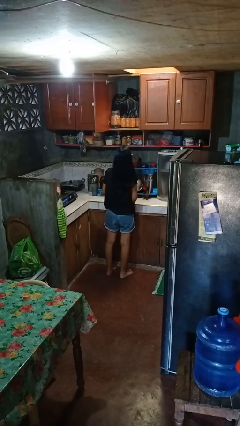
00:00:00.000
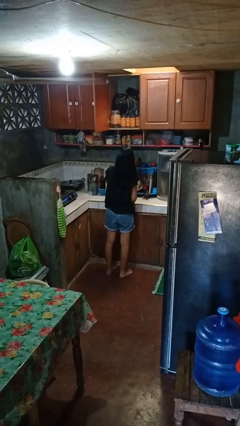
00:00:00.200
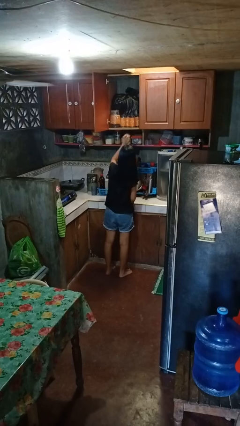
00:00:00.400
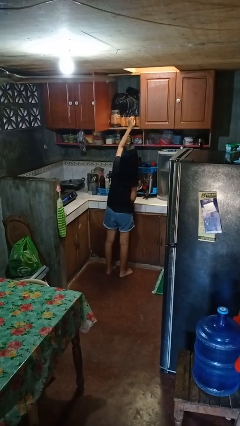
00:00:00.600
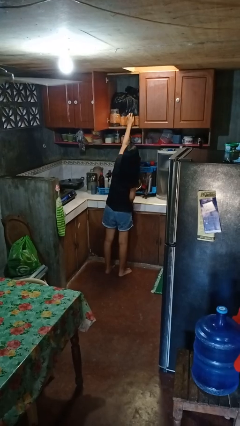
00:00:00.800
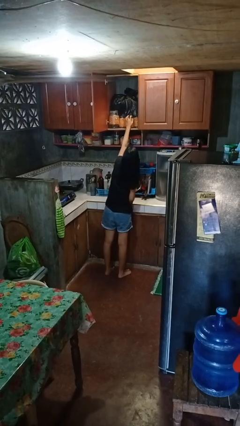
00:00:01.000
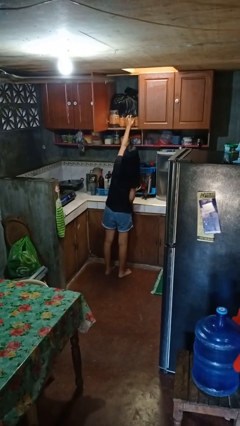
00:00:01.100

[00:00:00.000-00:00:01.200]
person picks up object from cabinet

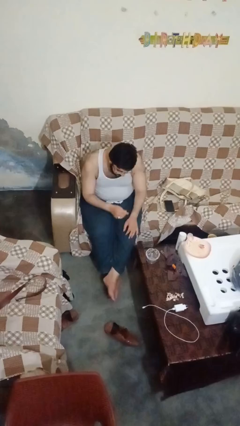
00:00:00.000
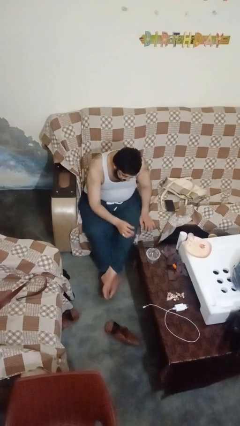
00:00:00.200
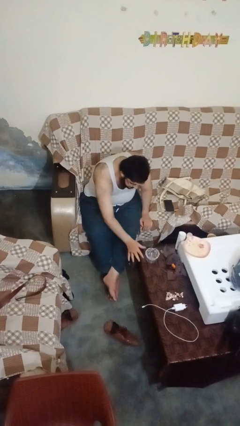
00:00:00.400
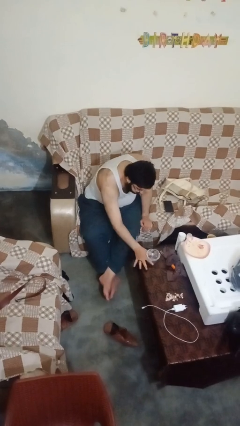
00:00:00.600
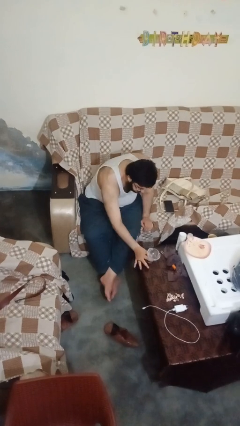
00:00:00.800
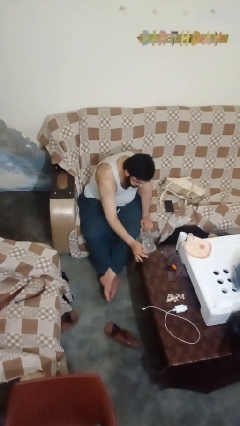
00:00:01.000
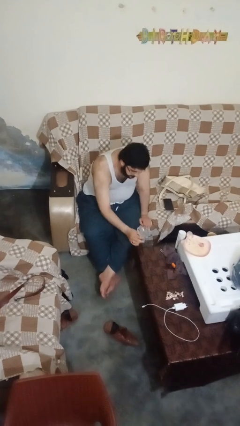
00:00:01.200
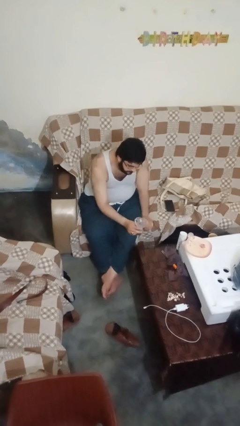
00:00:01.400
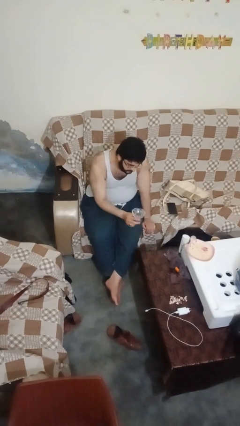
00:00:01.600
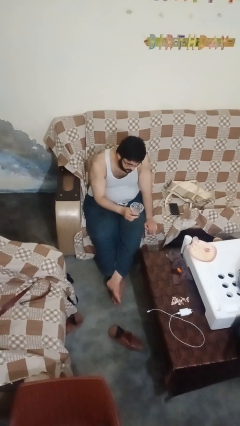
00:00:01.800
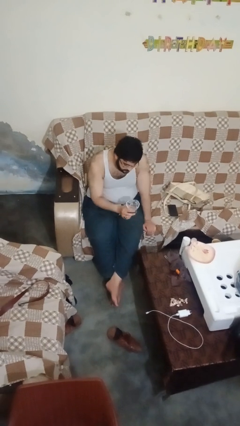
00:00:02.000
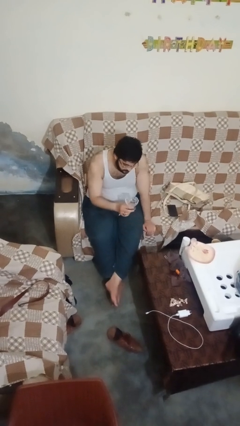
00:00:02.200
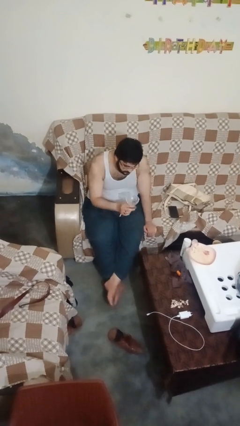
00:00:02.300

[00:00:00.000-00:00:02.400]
person picks up object from table

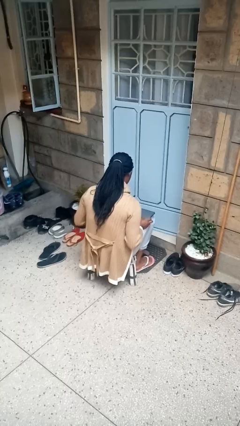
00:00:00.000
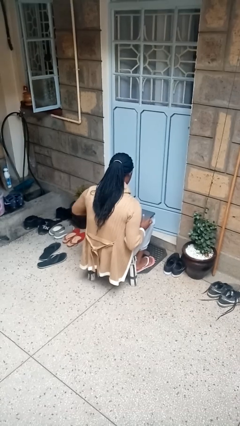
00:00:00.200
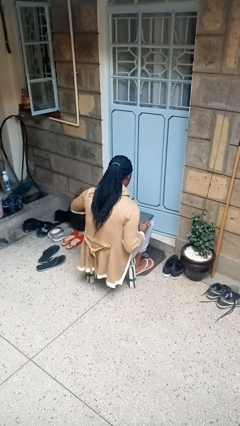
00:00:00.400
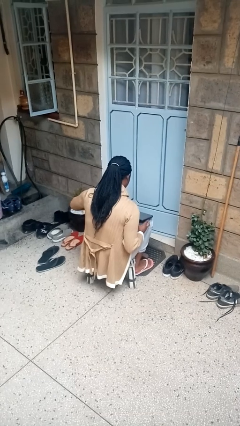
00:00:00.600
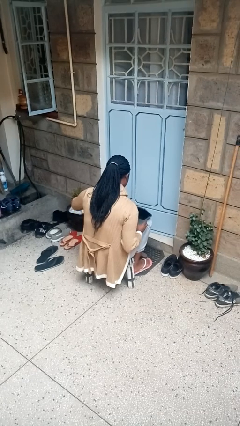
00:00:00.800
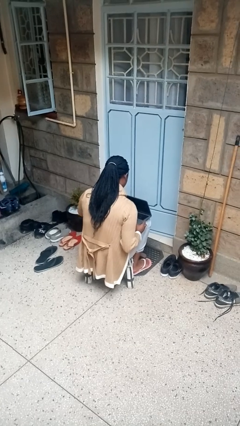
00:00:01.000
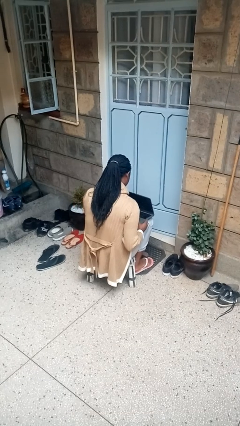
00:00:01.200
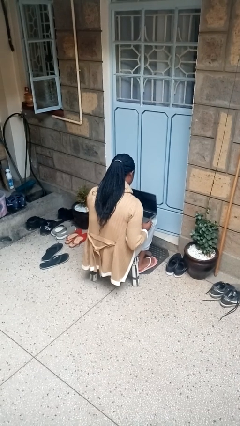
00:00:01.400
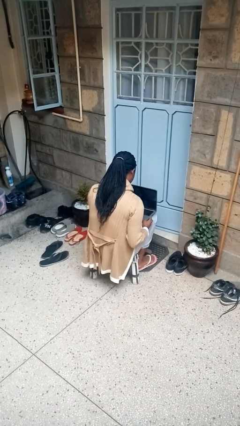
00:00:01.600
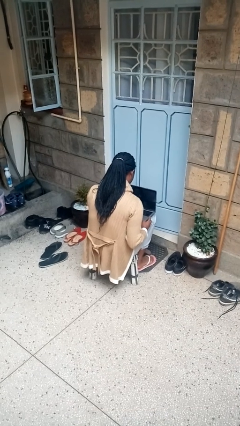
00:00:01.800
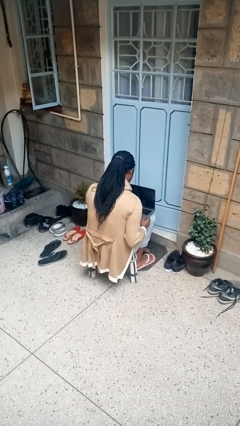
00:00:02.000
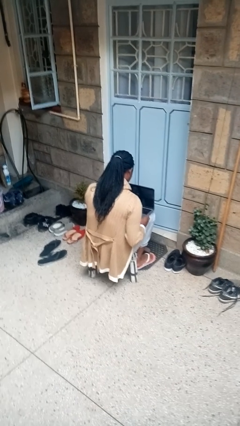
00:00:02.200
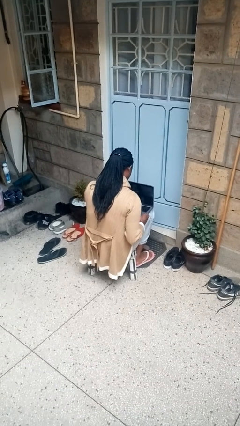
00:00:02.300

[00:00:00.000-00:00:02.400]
person opens laptop

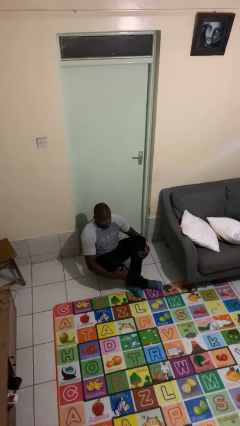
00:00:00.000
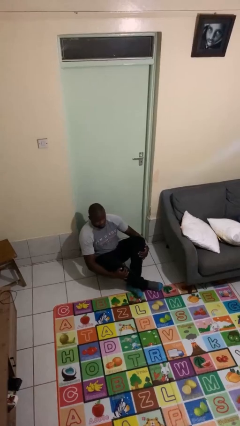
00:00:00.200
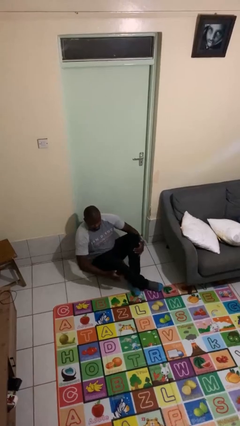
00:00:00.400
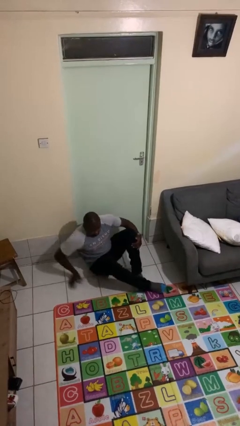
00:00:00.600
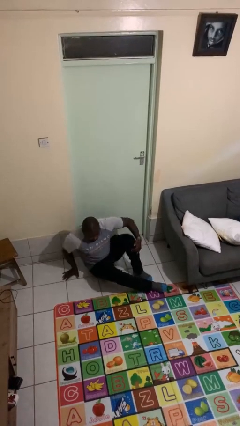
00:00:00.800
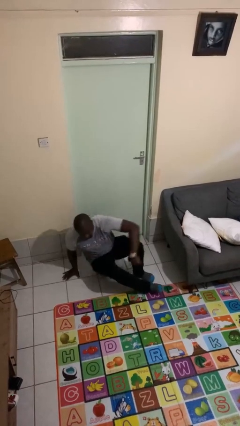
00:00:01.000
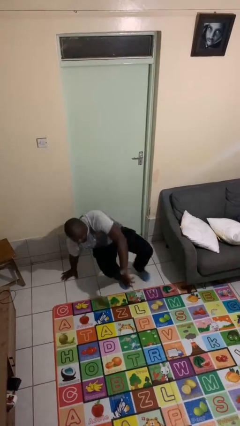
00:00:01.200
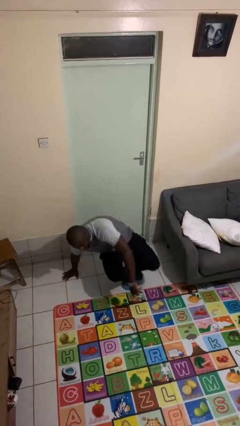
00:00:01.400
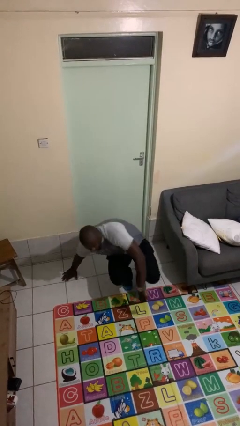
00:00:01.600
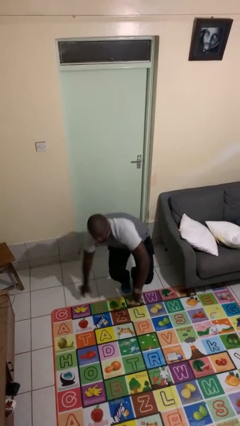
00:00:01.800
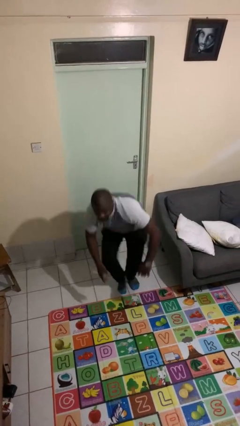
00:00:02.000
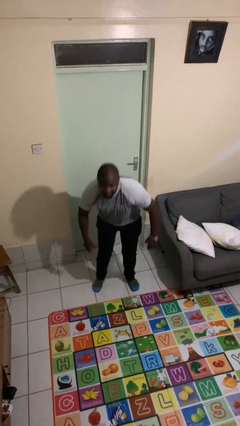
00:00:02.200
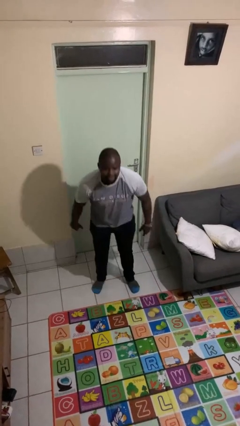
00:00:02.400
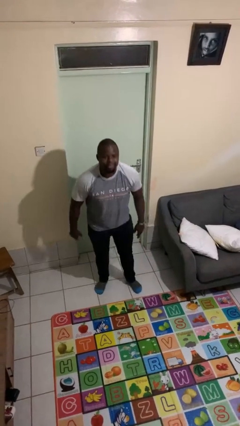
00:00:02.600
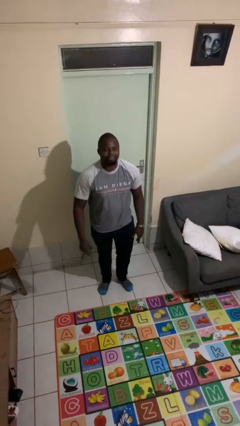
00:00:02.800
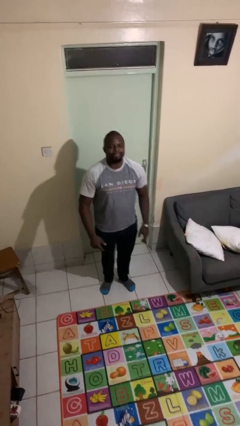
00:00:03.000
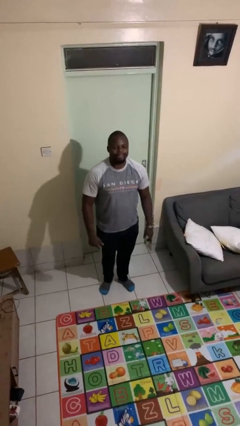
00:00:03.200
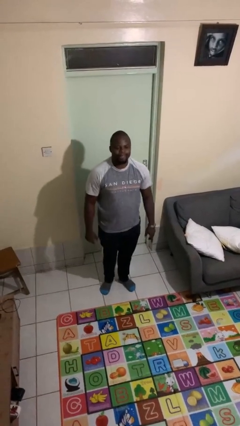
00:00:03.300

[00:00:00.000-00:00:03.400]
person stands up from floor

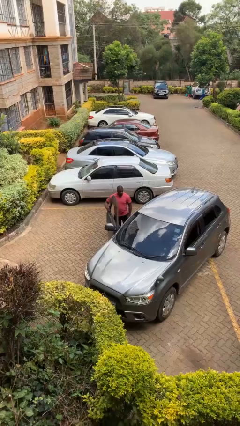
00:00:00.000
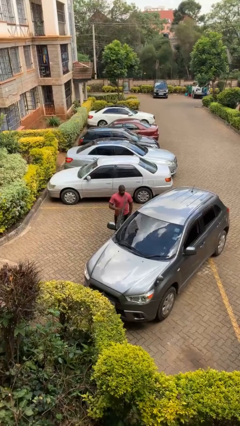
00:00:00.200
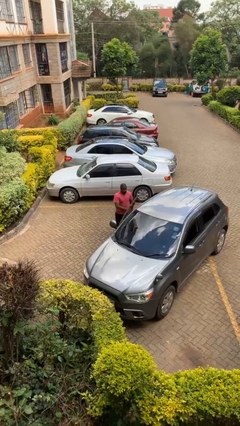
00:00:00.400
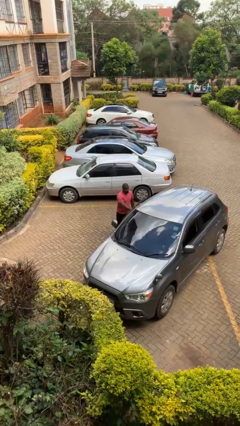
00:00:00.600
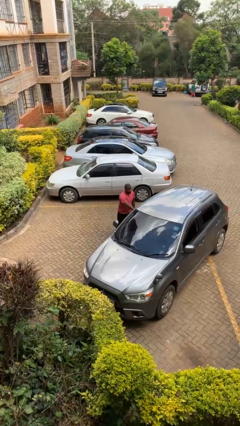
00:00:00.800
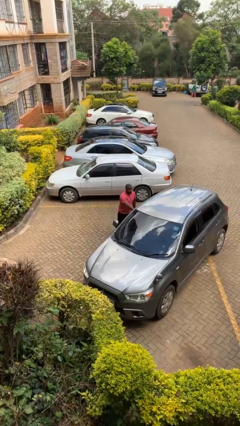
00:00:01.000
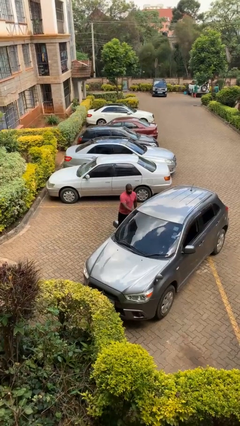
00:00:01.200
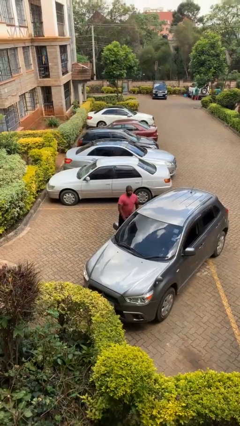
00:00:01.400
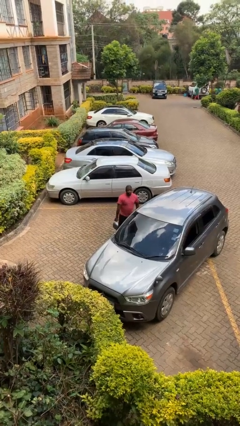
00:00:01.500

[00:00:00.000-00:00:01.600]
person closes car door

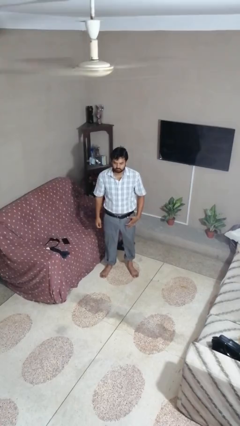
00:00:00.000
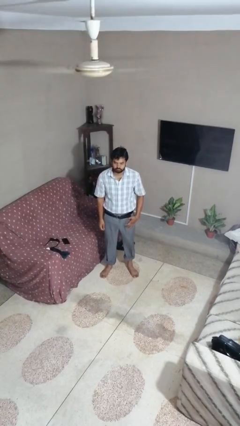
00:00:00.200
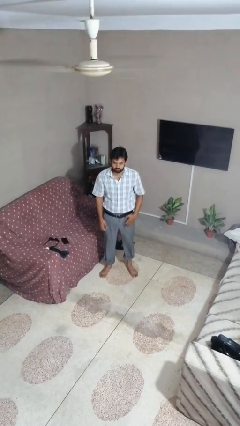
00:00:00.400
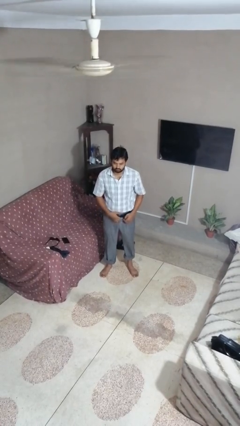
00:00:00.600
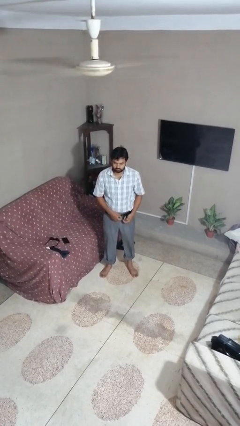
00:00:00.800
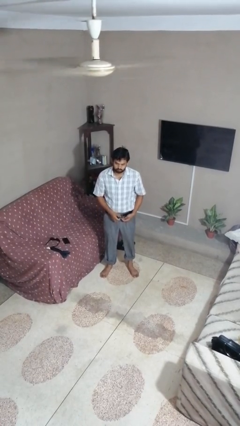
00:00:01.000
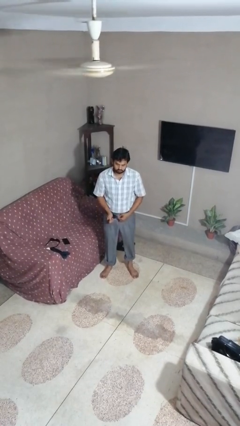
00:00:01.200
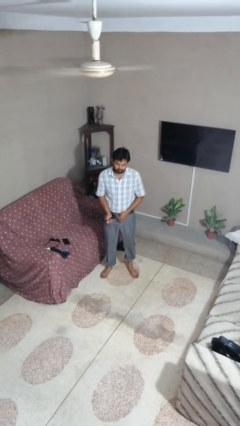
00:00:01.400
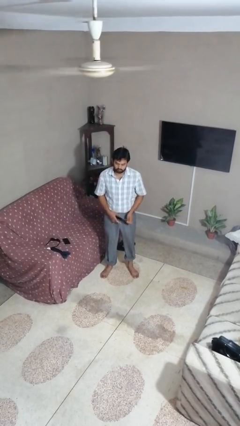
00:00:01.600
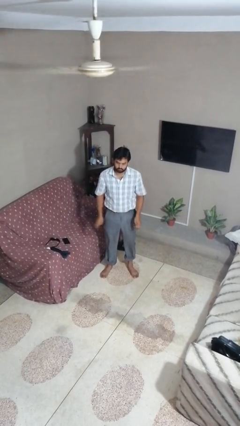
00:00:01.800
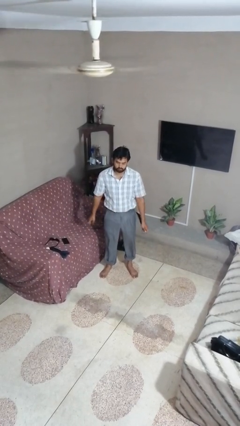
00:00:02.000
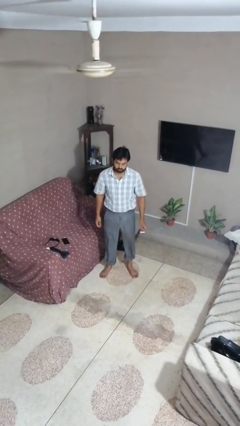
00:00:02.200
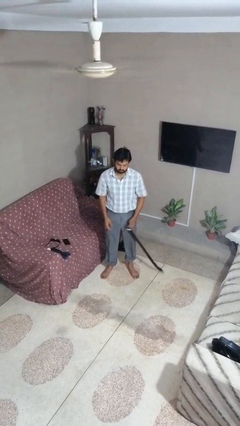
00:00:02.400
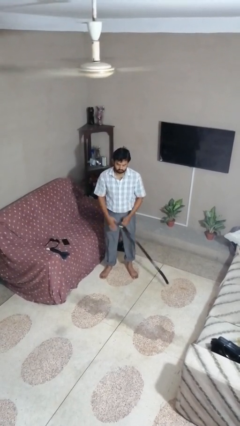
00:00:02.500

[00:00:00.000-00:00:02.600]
person takes off belt

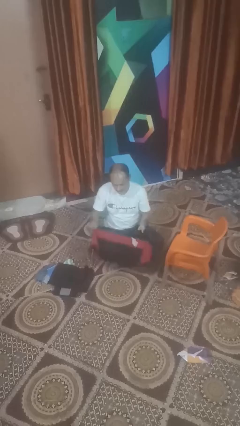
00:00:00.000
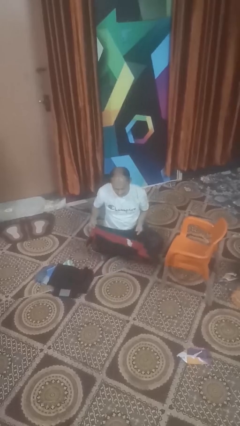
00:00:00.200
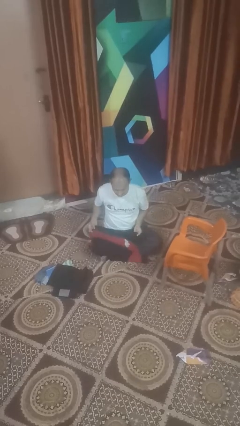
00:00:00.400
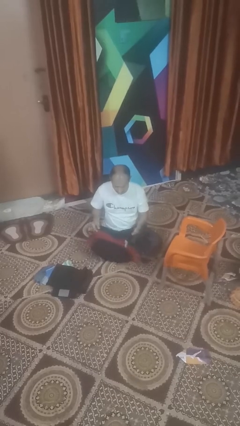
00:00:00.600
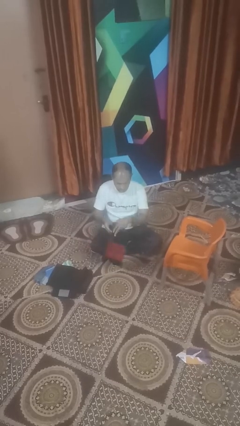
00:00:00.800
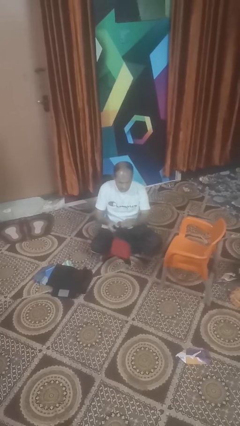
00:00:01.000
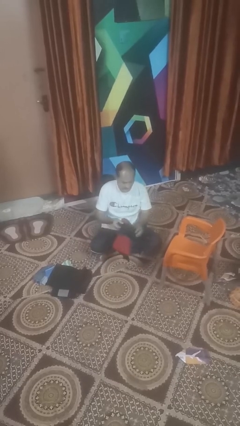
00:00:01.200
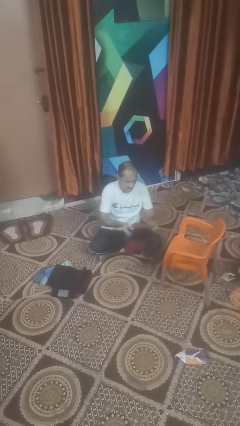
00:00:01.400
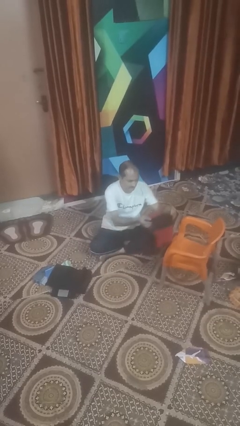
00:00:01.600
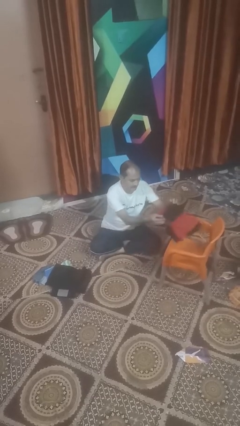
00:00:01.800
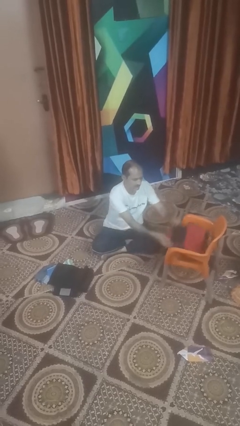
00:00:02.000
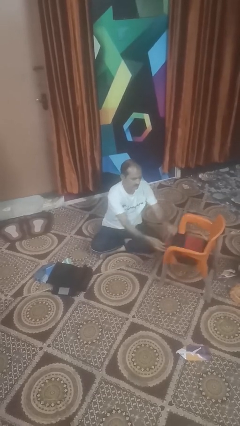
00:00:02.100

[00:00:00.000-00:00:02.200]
person folds shirt

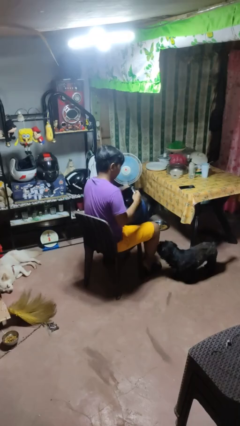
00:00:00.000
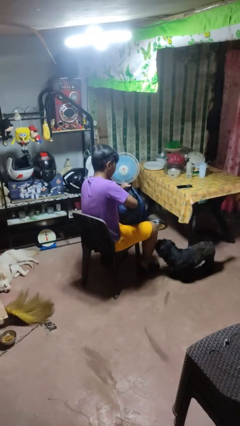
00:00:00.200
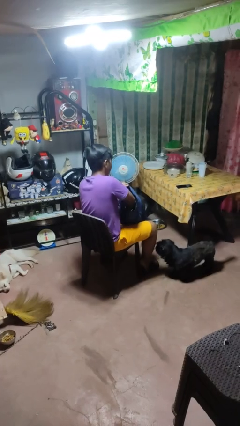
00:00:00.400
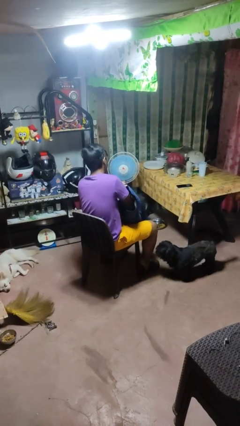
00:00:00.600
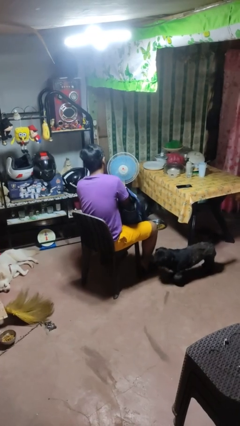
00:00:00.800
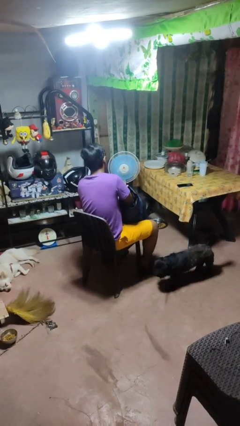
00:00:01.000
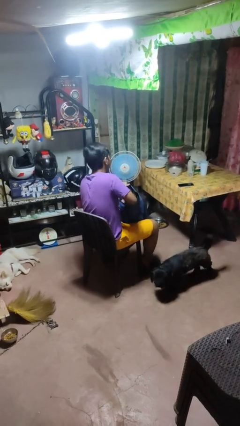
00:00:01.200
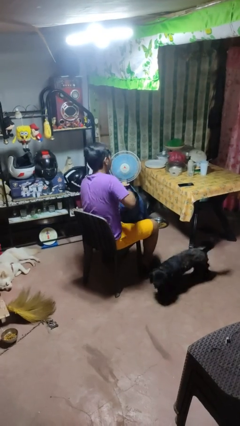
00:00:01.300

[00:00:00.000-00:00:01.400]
person puts object into backpack
